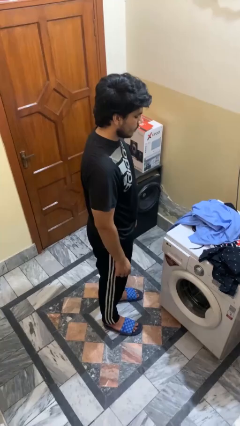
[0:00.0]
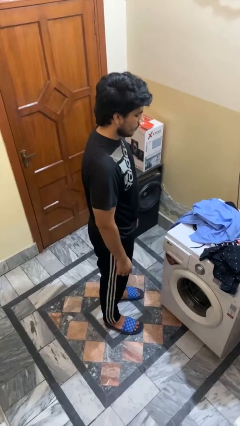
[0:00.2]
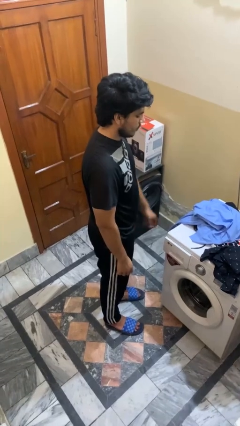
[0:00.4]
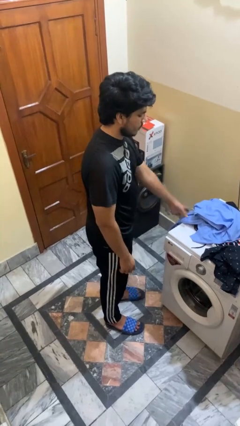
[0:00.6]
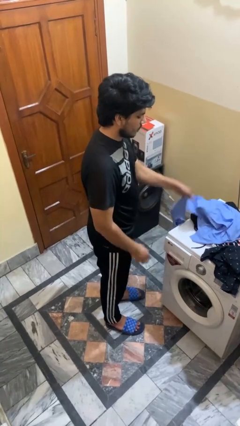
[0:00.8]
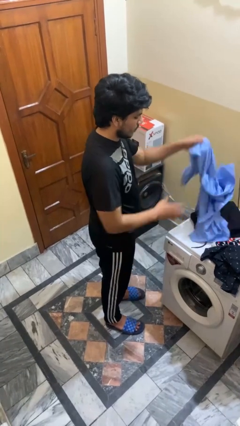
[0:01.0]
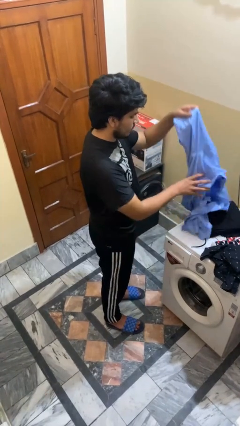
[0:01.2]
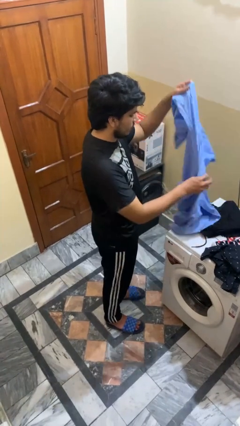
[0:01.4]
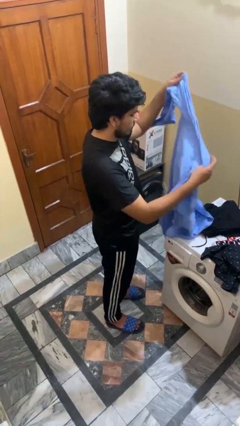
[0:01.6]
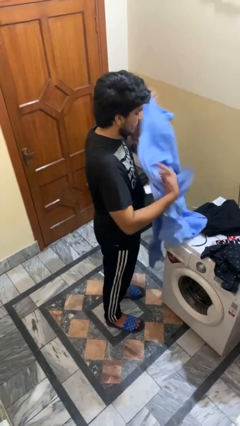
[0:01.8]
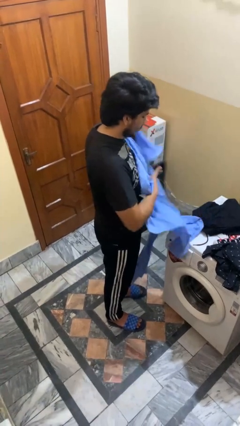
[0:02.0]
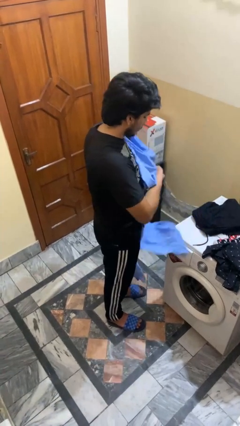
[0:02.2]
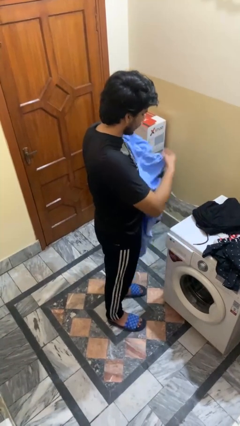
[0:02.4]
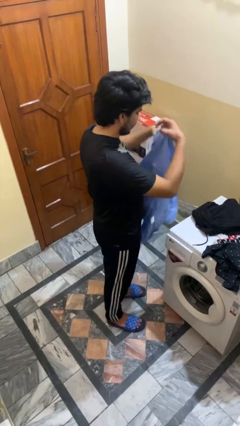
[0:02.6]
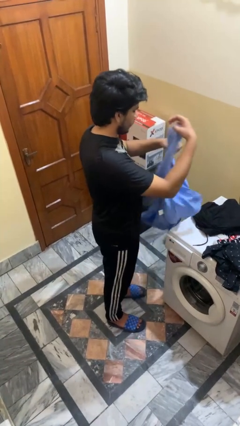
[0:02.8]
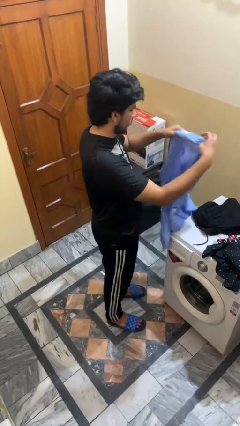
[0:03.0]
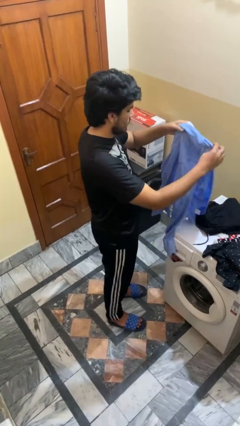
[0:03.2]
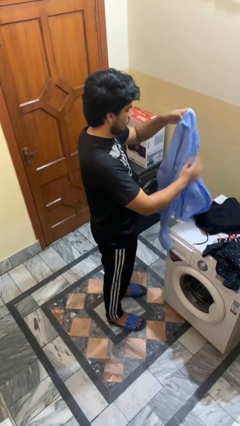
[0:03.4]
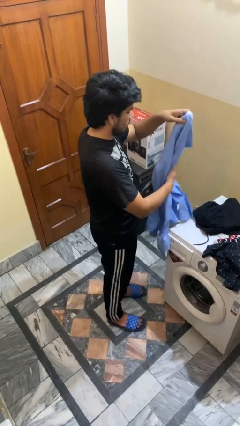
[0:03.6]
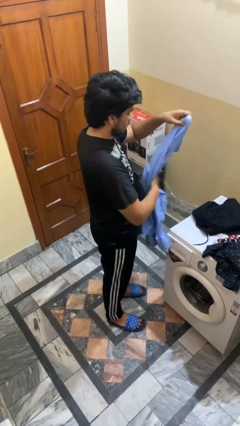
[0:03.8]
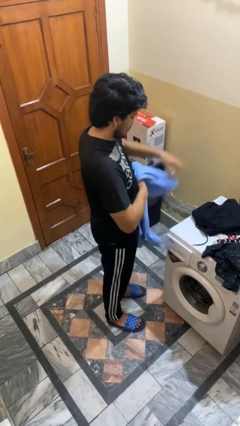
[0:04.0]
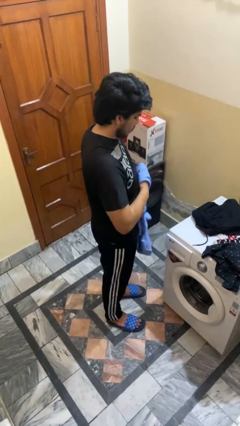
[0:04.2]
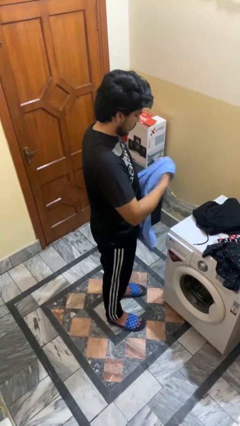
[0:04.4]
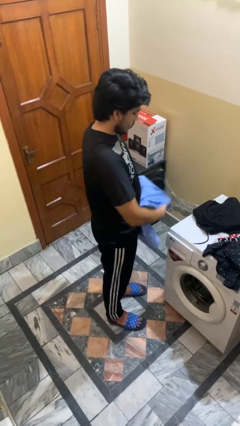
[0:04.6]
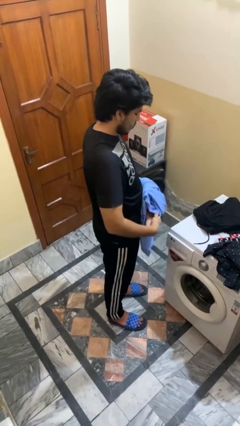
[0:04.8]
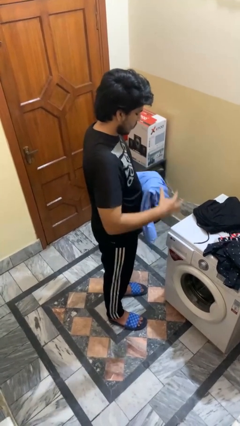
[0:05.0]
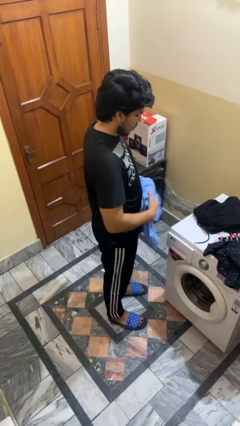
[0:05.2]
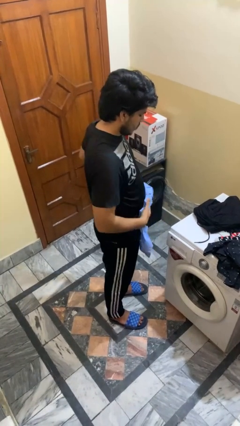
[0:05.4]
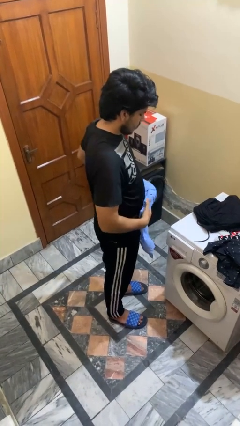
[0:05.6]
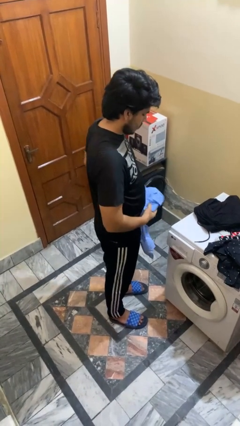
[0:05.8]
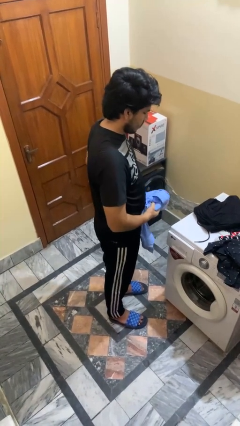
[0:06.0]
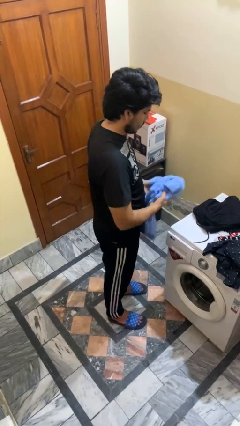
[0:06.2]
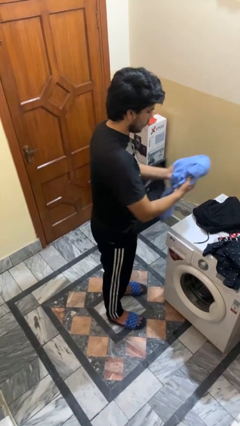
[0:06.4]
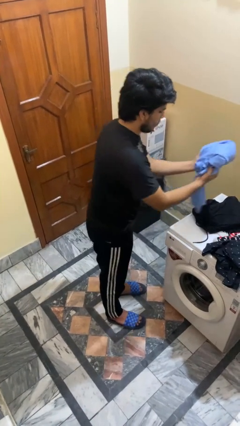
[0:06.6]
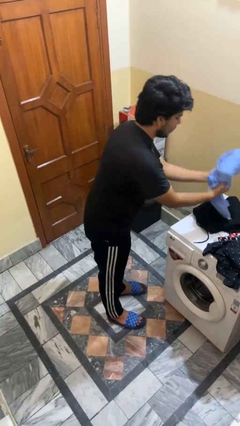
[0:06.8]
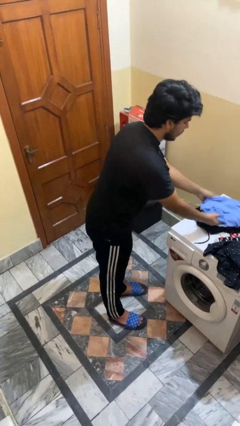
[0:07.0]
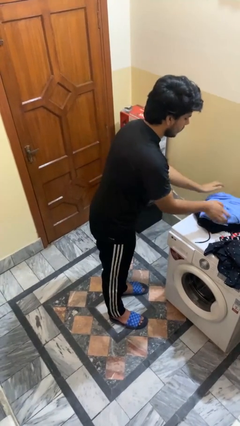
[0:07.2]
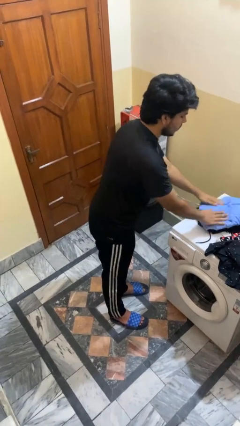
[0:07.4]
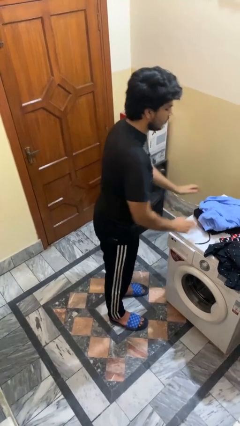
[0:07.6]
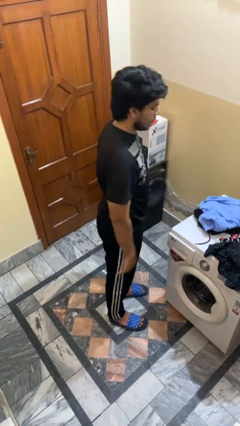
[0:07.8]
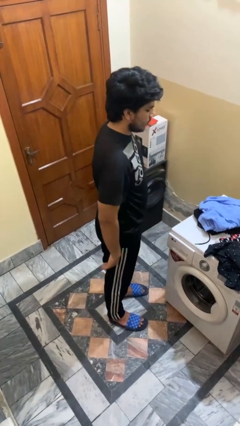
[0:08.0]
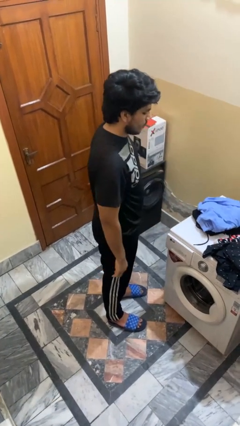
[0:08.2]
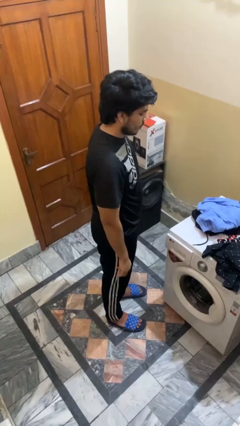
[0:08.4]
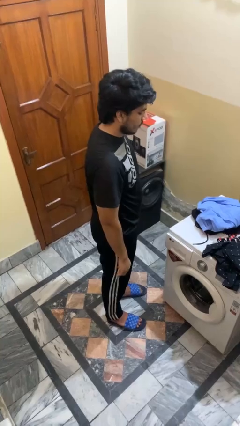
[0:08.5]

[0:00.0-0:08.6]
person folds shirt

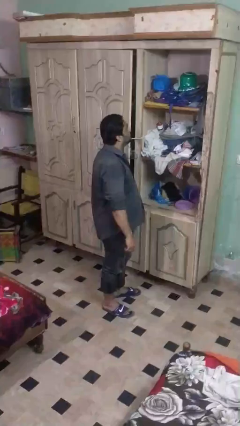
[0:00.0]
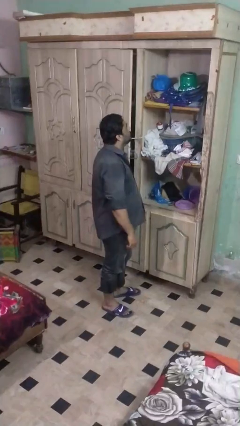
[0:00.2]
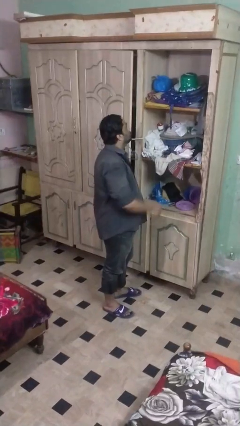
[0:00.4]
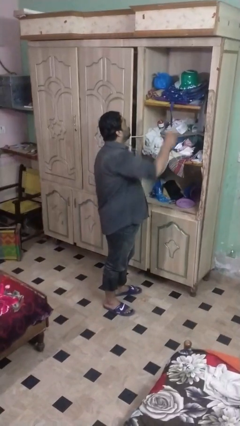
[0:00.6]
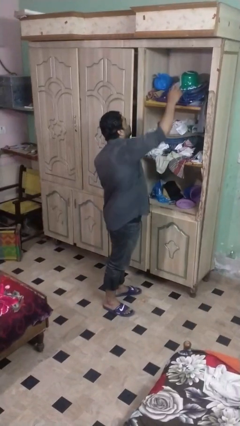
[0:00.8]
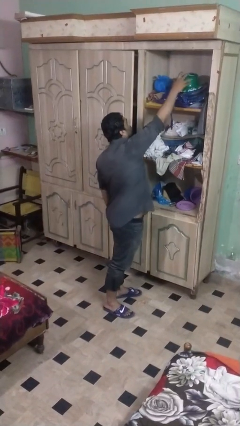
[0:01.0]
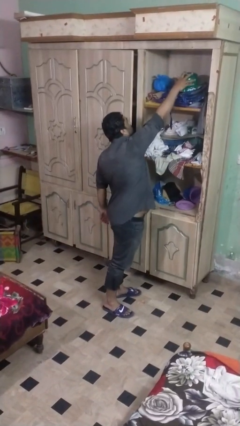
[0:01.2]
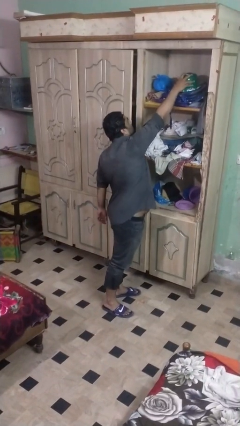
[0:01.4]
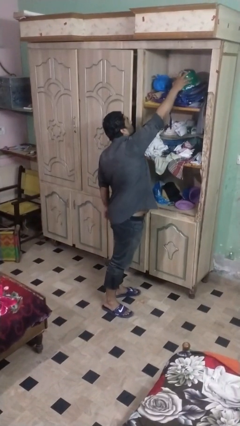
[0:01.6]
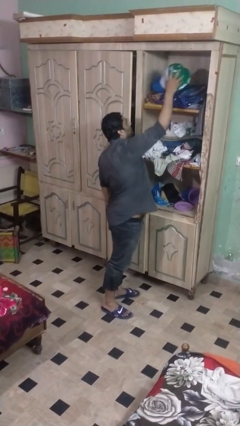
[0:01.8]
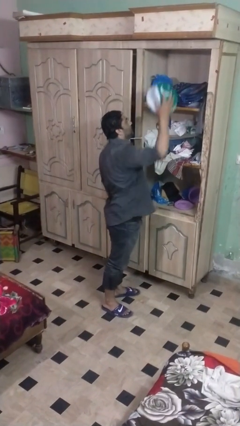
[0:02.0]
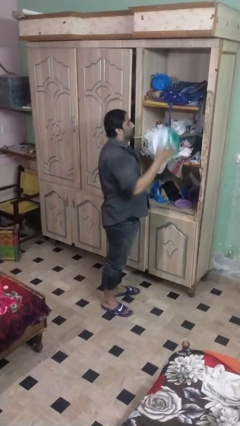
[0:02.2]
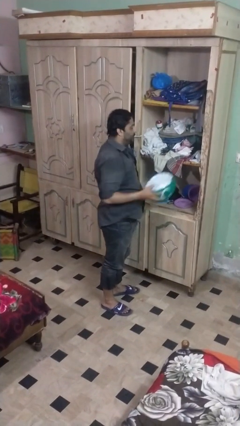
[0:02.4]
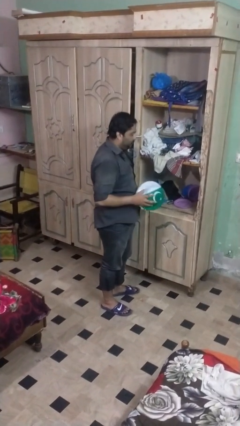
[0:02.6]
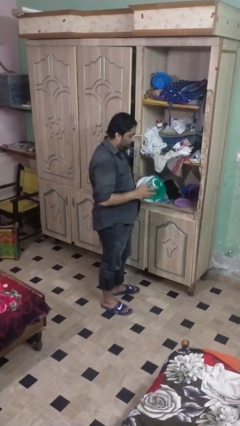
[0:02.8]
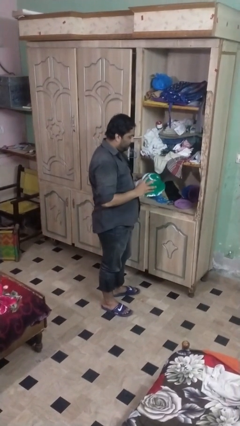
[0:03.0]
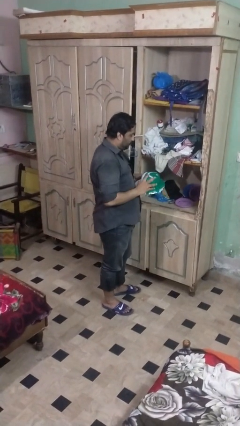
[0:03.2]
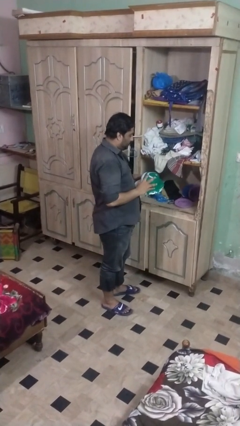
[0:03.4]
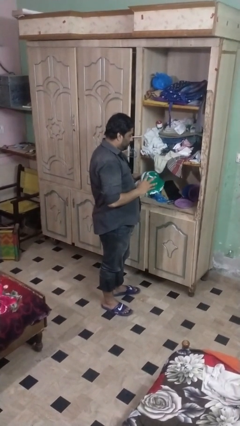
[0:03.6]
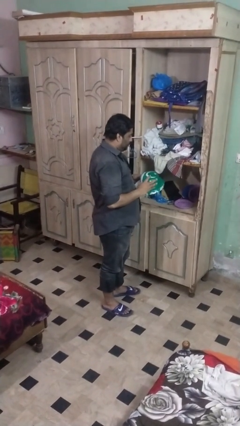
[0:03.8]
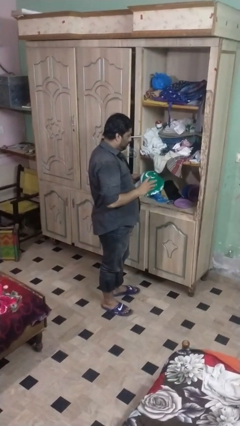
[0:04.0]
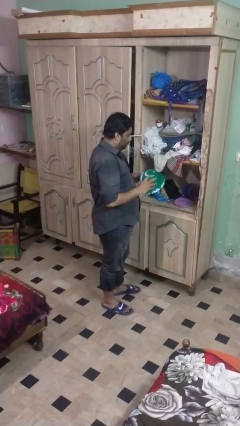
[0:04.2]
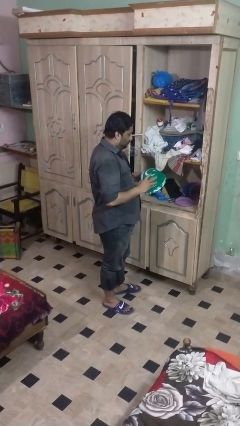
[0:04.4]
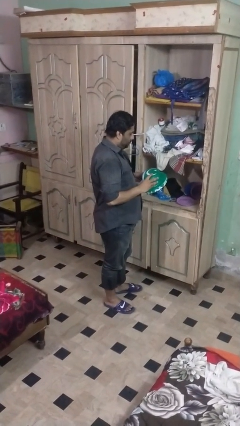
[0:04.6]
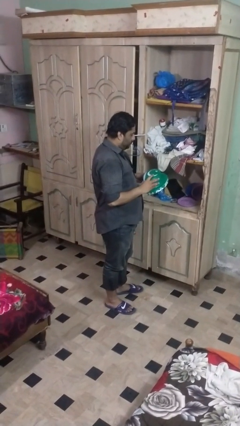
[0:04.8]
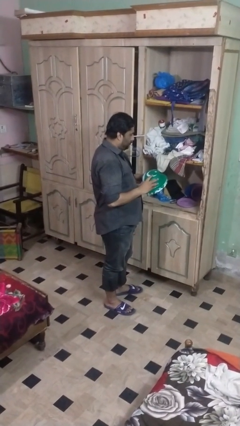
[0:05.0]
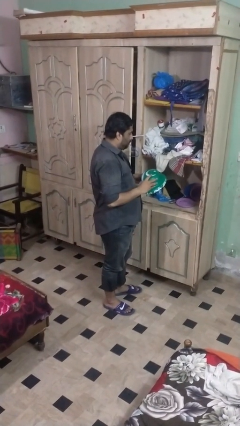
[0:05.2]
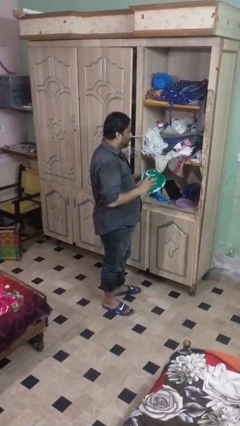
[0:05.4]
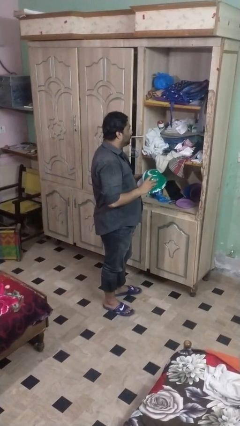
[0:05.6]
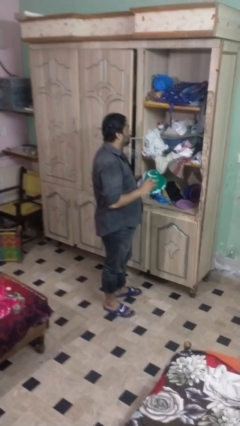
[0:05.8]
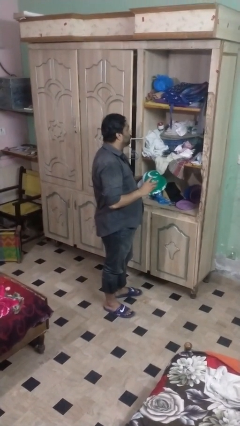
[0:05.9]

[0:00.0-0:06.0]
person picks up object from shelf

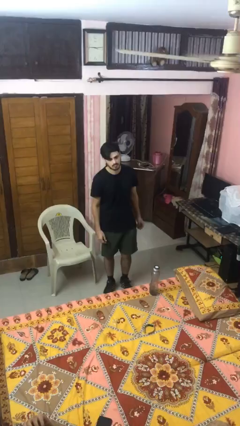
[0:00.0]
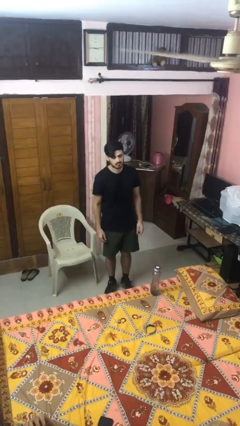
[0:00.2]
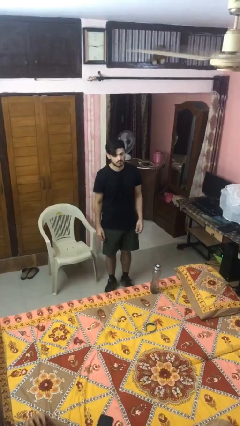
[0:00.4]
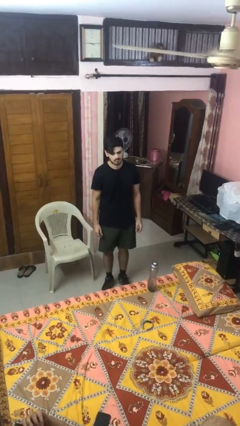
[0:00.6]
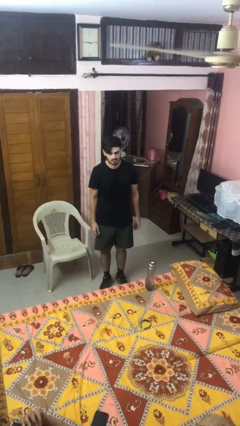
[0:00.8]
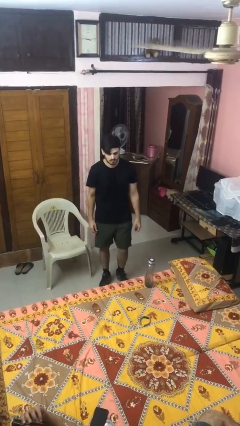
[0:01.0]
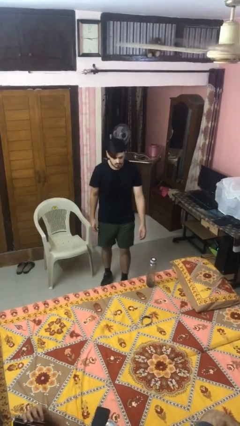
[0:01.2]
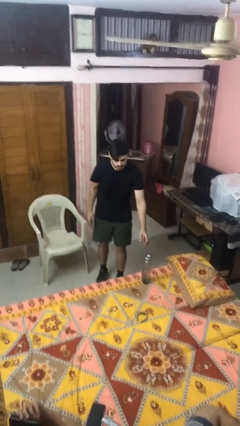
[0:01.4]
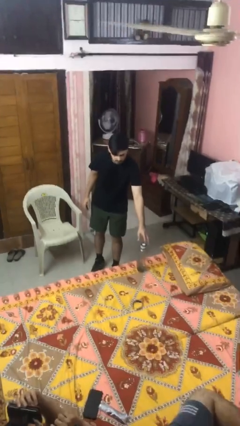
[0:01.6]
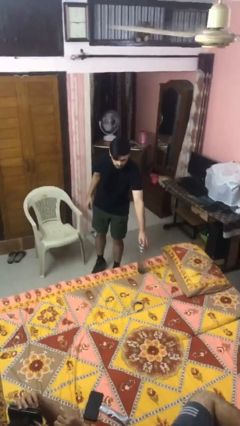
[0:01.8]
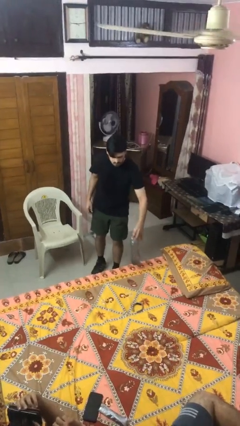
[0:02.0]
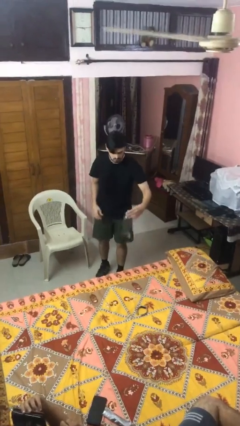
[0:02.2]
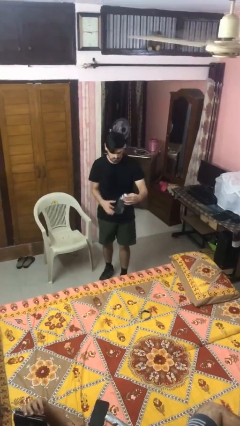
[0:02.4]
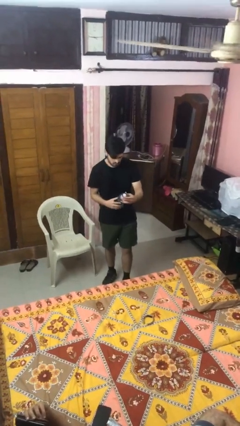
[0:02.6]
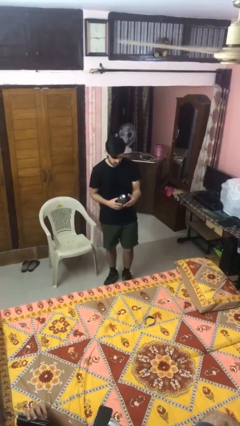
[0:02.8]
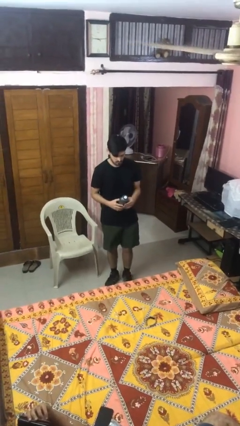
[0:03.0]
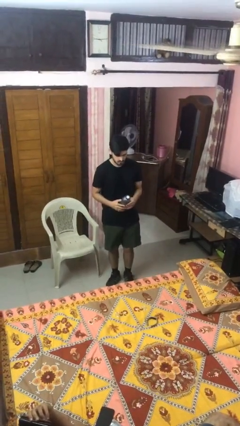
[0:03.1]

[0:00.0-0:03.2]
person picks up object from bed
